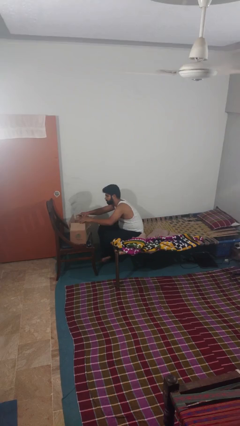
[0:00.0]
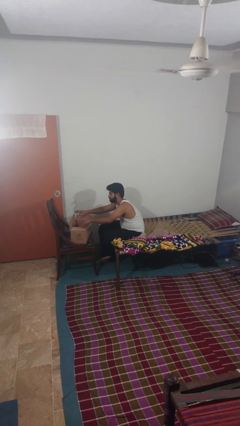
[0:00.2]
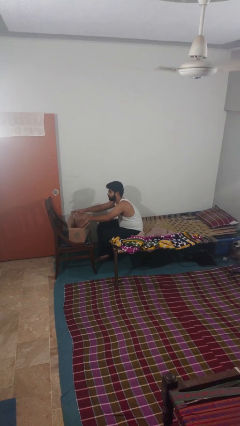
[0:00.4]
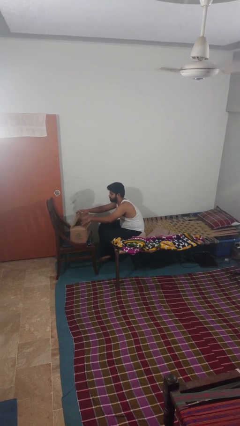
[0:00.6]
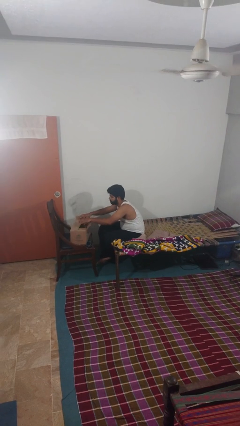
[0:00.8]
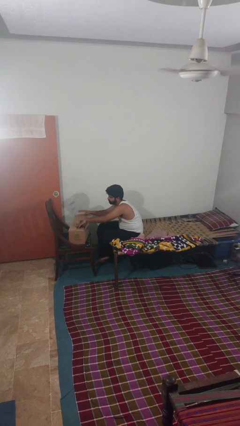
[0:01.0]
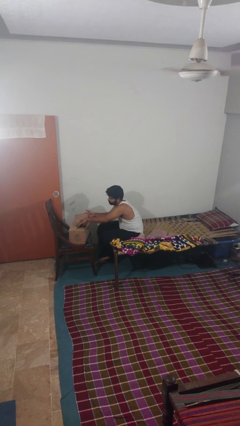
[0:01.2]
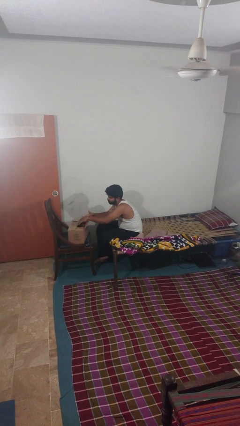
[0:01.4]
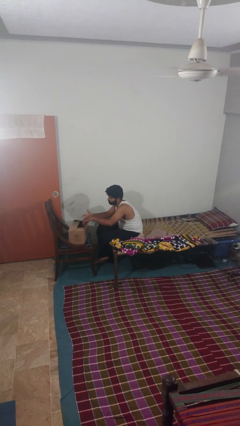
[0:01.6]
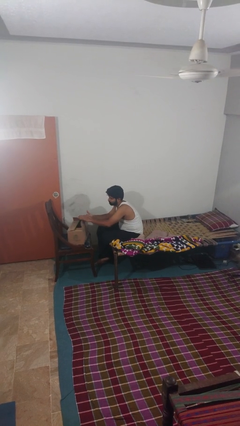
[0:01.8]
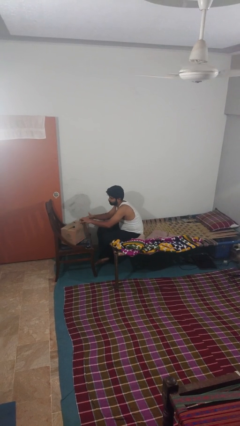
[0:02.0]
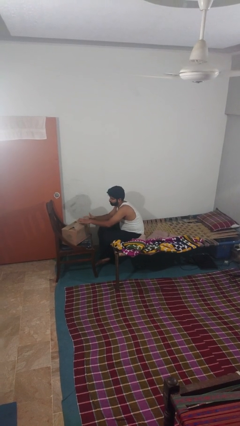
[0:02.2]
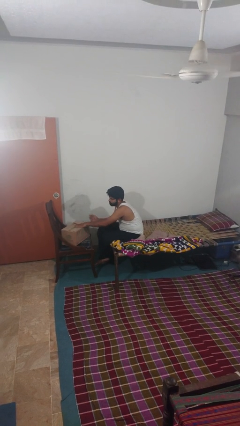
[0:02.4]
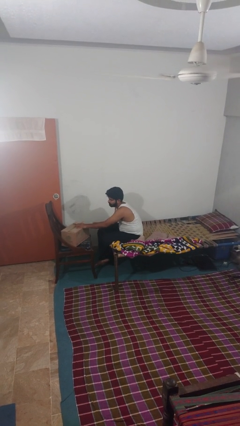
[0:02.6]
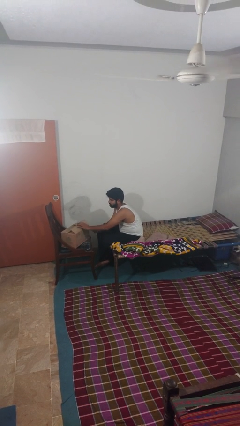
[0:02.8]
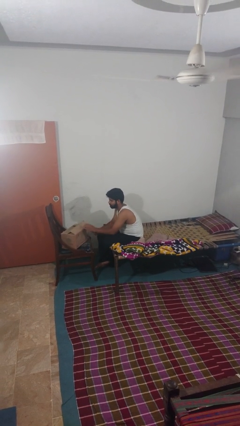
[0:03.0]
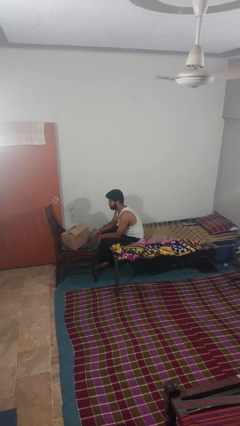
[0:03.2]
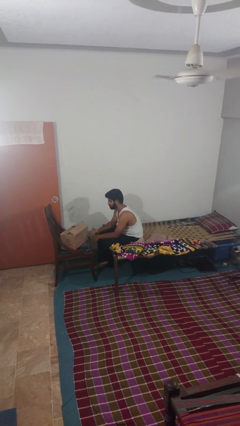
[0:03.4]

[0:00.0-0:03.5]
person closes box

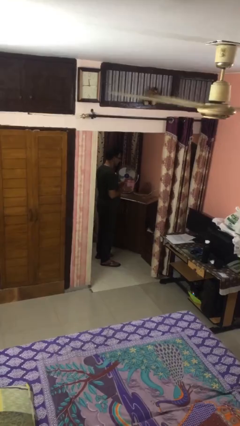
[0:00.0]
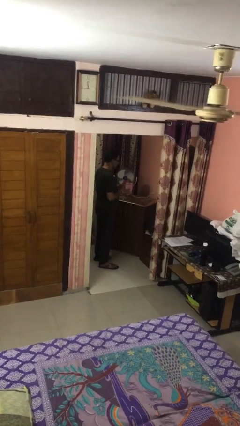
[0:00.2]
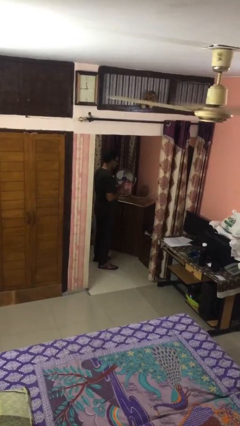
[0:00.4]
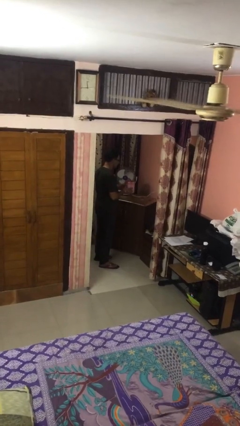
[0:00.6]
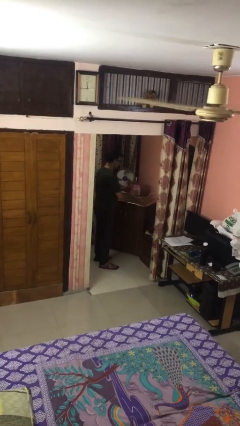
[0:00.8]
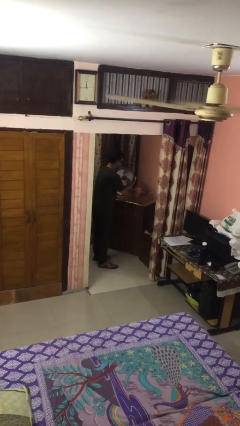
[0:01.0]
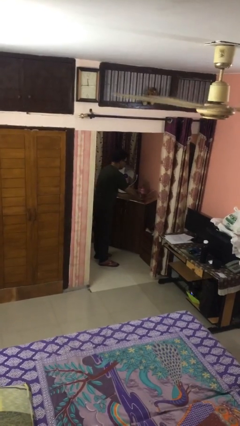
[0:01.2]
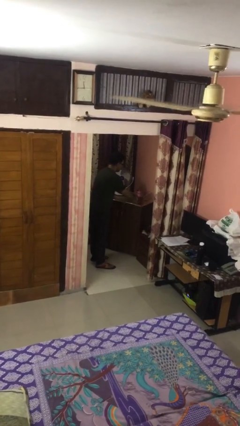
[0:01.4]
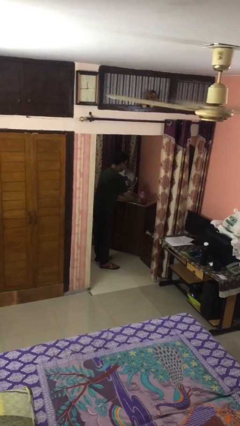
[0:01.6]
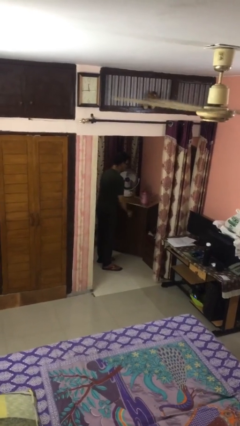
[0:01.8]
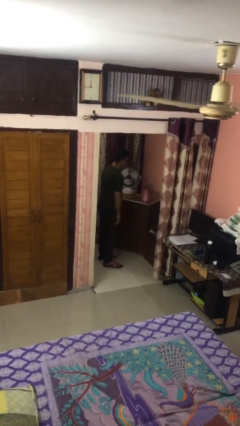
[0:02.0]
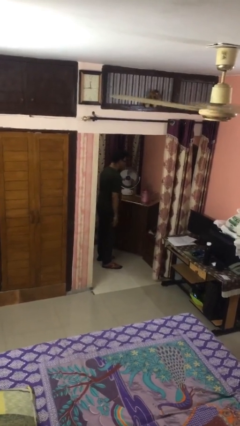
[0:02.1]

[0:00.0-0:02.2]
person puts down object on countertop

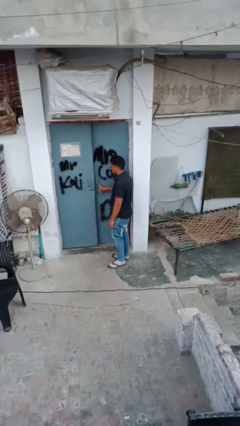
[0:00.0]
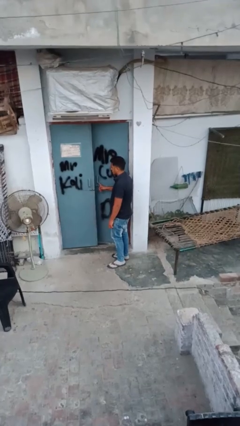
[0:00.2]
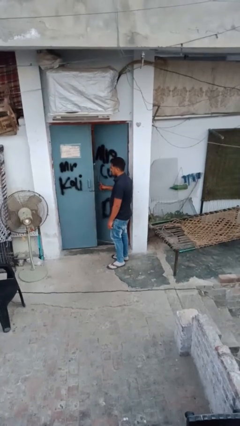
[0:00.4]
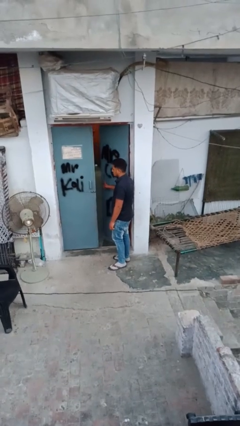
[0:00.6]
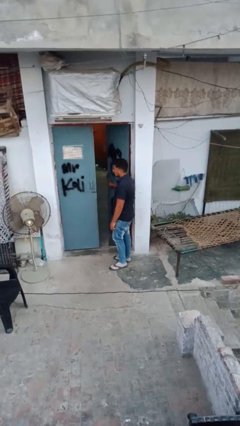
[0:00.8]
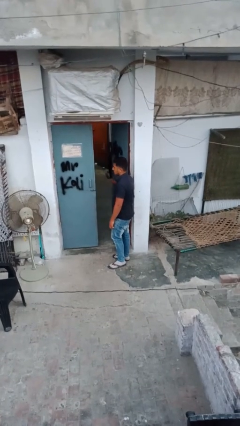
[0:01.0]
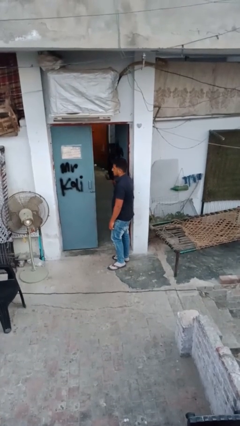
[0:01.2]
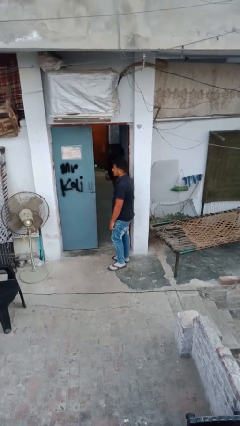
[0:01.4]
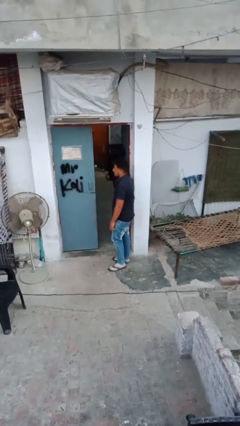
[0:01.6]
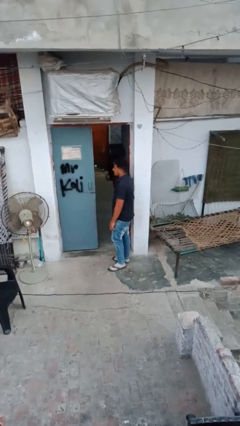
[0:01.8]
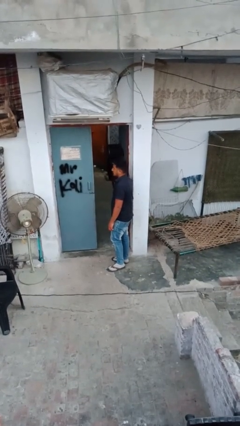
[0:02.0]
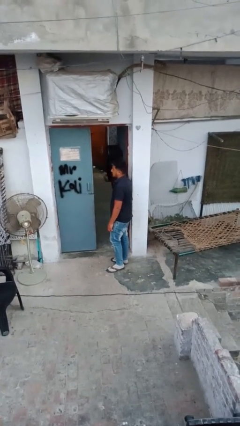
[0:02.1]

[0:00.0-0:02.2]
person opens facility door

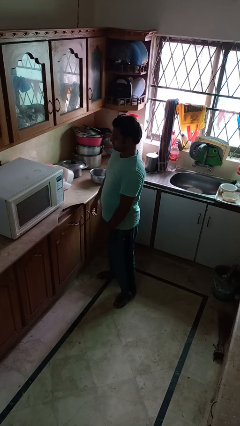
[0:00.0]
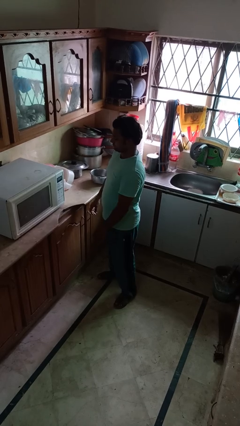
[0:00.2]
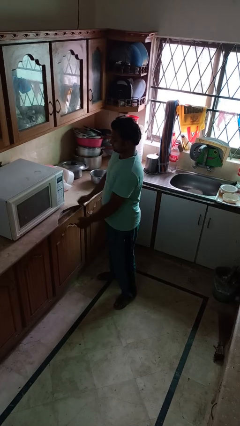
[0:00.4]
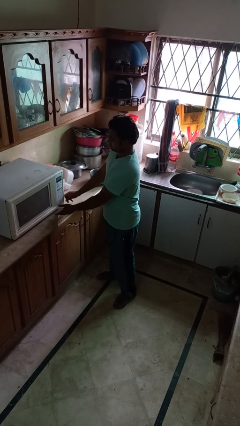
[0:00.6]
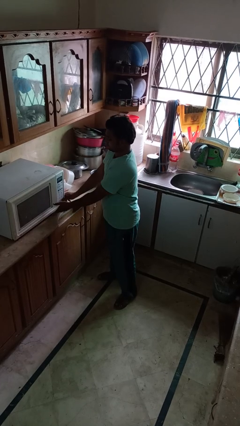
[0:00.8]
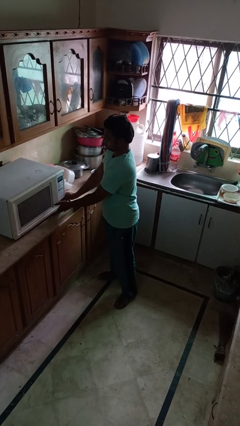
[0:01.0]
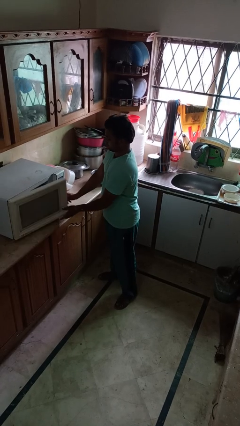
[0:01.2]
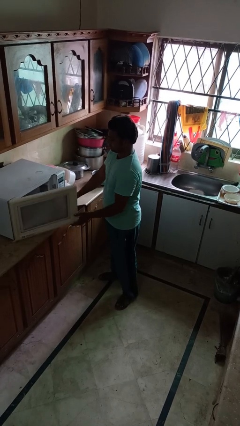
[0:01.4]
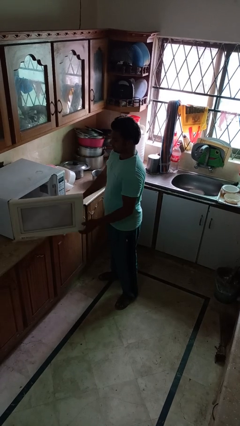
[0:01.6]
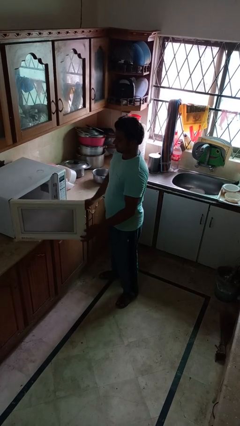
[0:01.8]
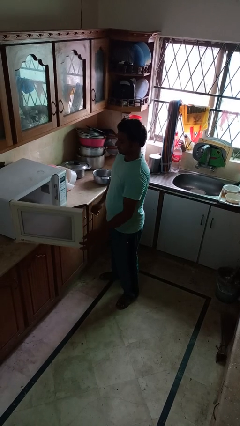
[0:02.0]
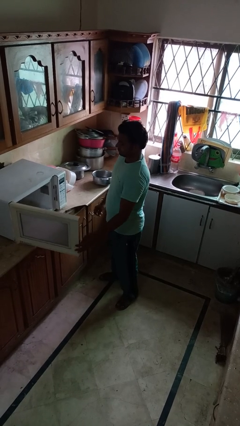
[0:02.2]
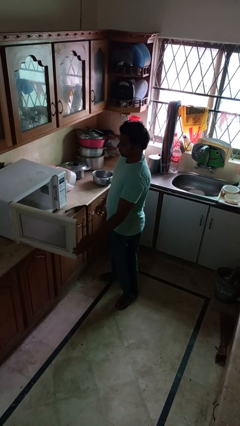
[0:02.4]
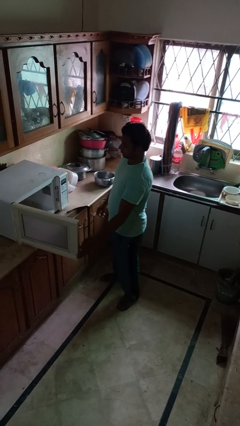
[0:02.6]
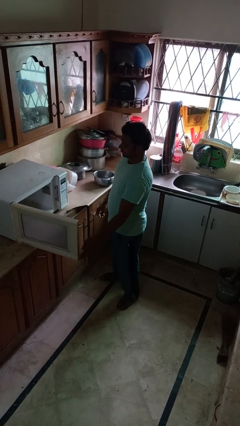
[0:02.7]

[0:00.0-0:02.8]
person opens microwave

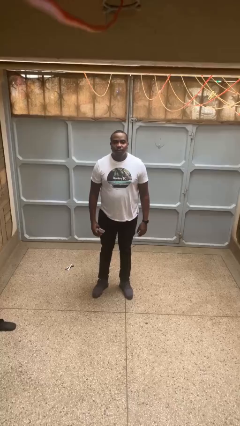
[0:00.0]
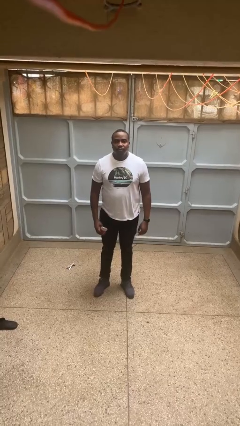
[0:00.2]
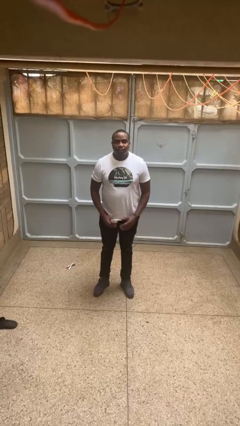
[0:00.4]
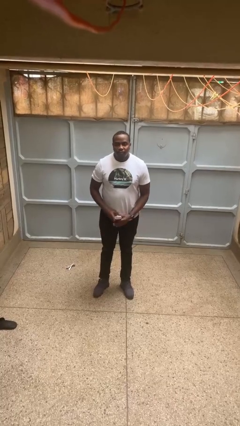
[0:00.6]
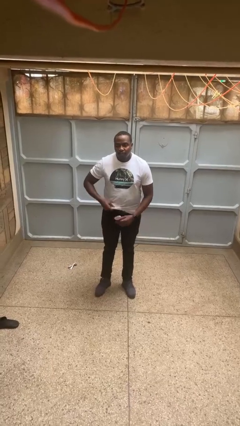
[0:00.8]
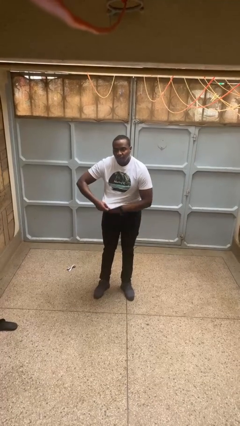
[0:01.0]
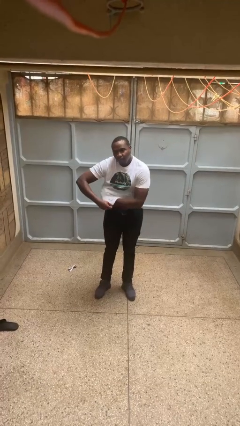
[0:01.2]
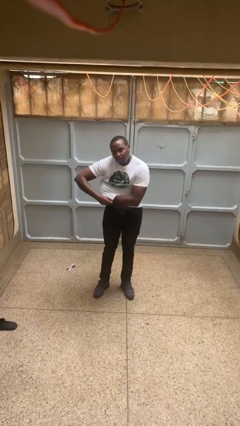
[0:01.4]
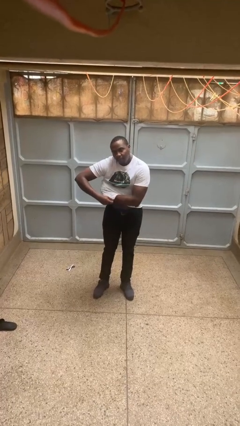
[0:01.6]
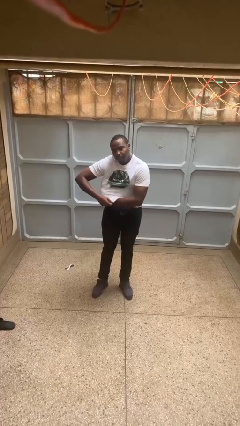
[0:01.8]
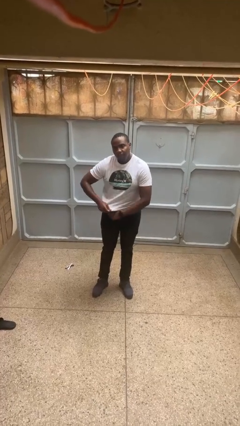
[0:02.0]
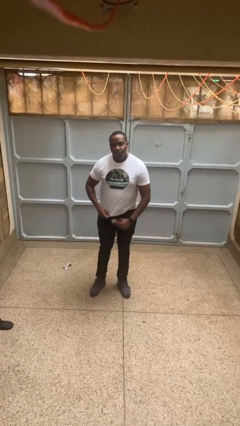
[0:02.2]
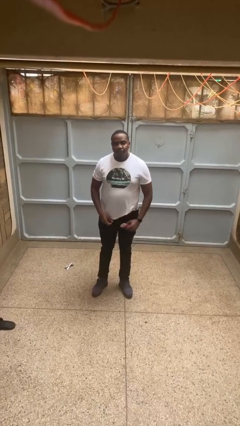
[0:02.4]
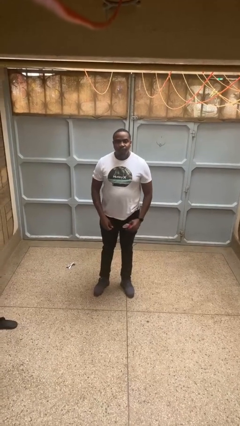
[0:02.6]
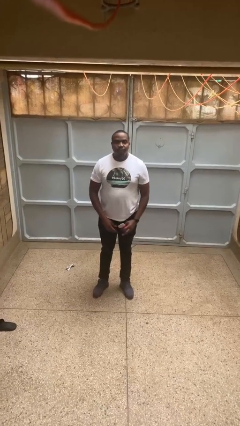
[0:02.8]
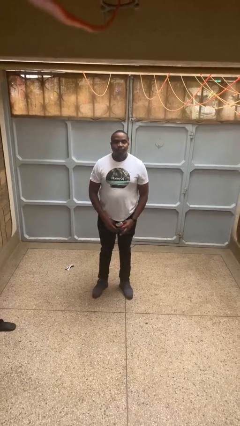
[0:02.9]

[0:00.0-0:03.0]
person applies deodorant

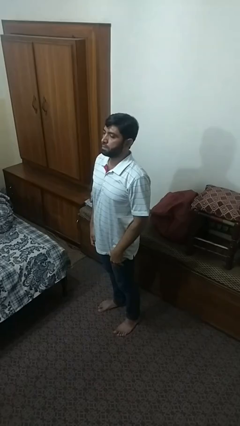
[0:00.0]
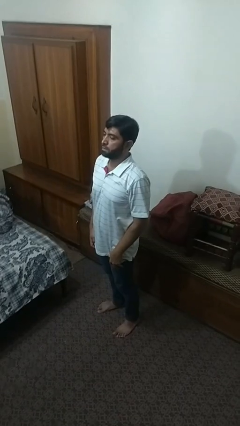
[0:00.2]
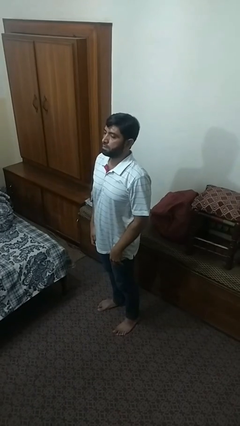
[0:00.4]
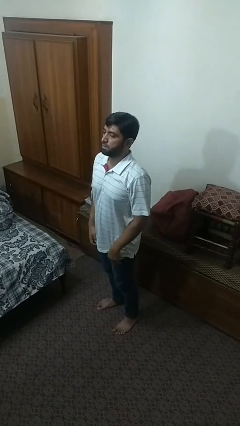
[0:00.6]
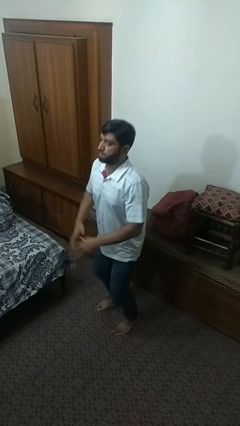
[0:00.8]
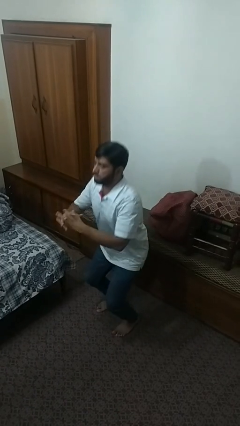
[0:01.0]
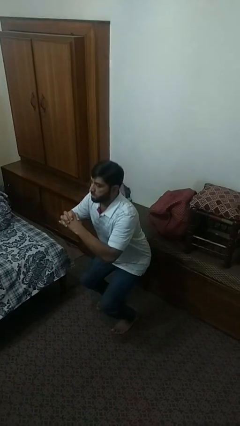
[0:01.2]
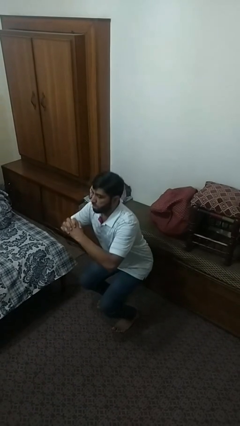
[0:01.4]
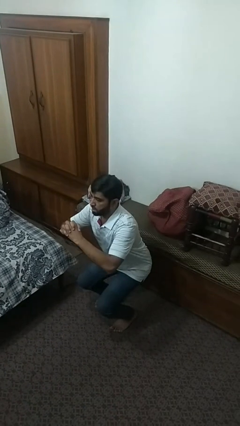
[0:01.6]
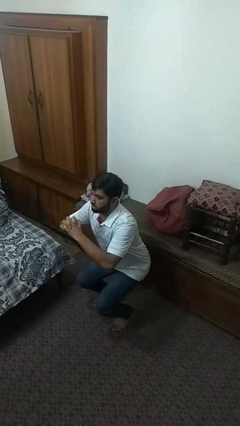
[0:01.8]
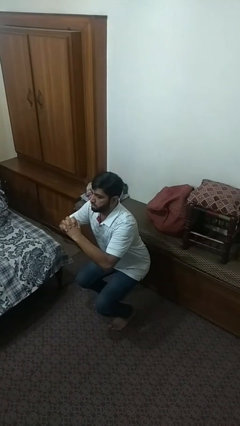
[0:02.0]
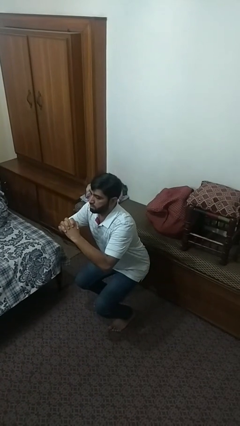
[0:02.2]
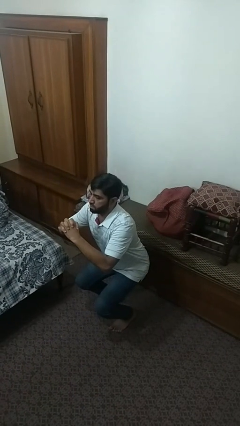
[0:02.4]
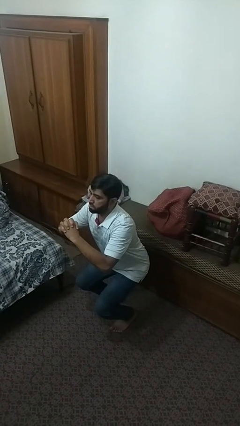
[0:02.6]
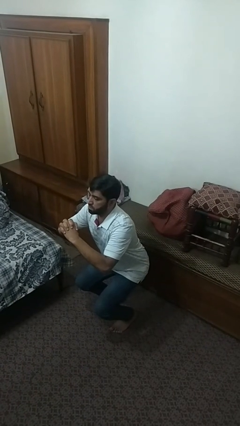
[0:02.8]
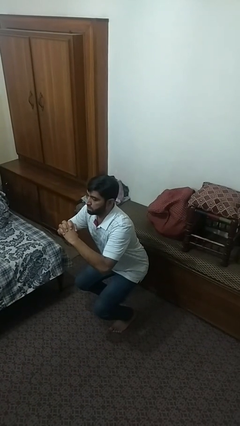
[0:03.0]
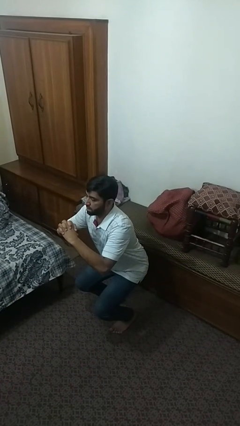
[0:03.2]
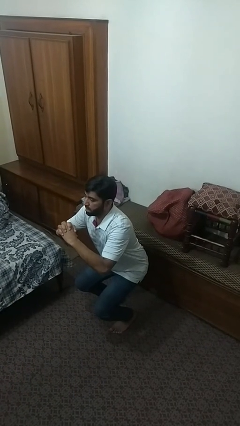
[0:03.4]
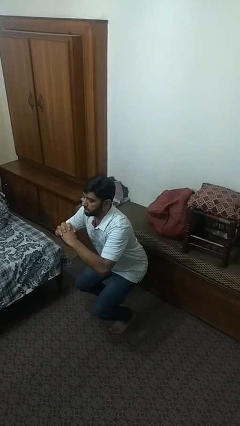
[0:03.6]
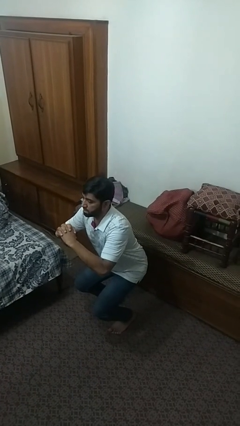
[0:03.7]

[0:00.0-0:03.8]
person squats
